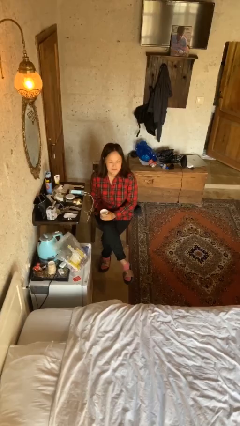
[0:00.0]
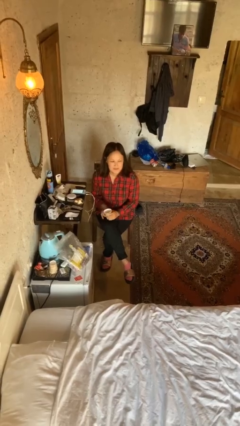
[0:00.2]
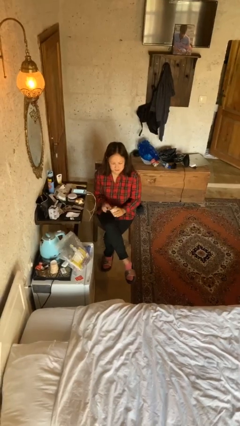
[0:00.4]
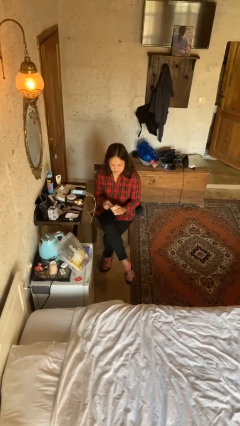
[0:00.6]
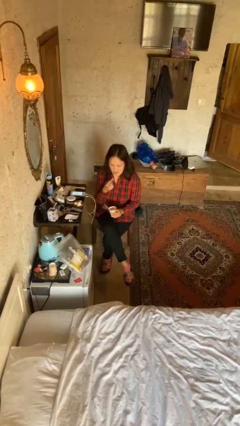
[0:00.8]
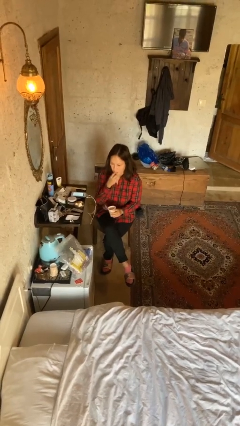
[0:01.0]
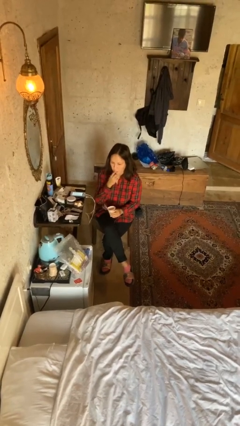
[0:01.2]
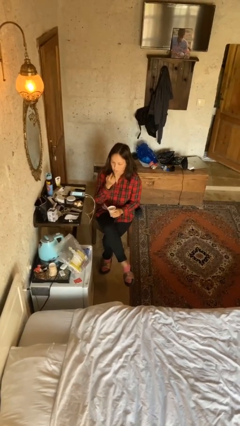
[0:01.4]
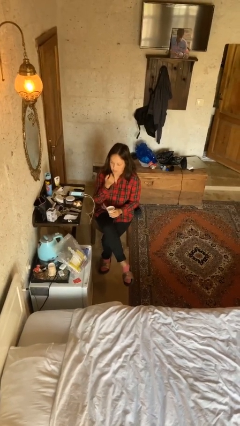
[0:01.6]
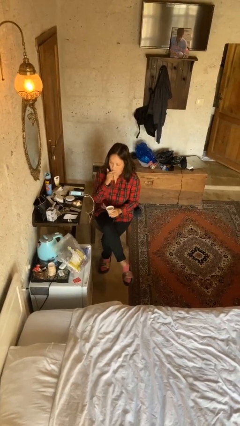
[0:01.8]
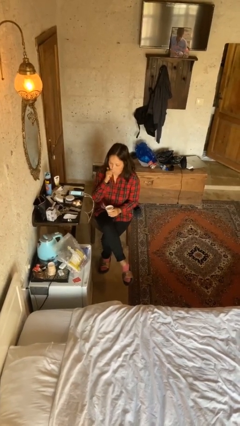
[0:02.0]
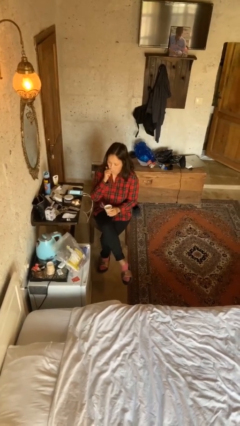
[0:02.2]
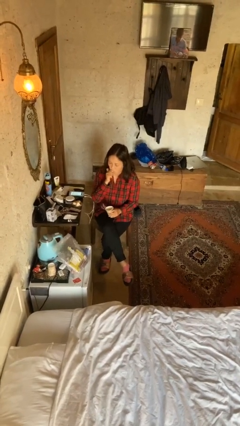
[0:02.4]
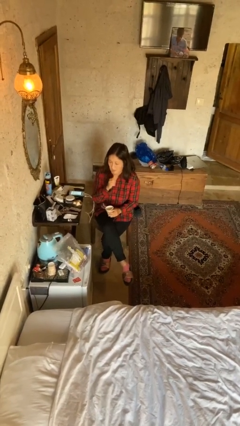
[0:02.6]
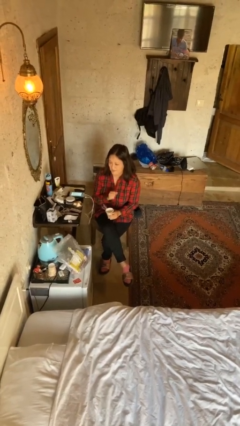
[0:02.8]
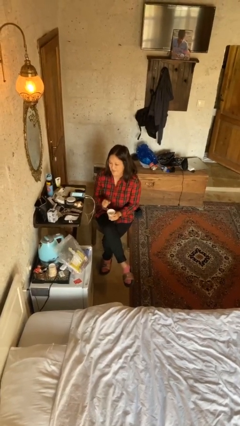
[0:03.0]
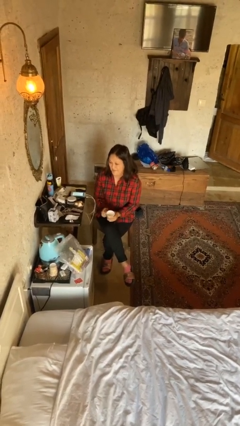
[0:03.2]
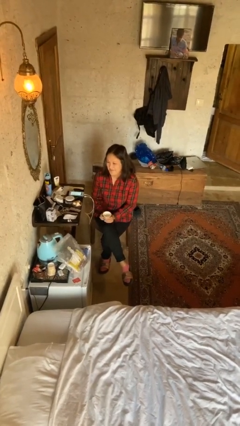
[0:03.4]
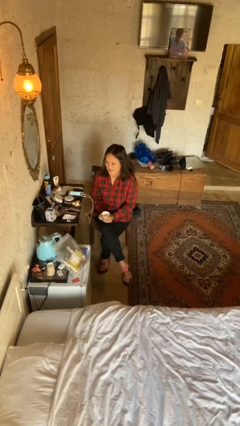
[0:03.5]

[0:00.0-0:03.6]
person licks fingers

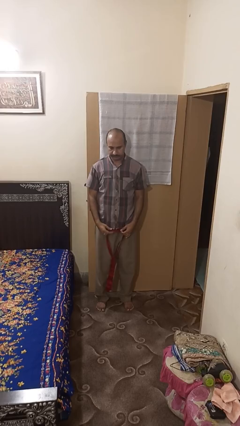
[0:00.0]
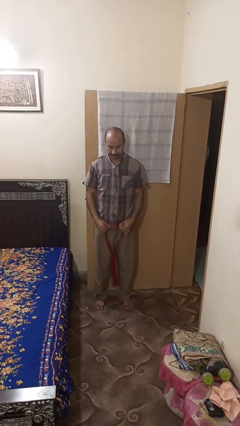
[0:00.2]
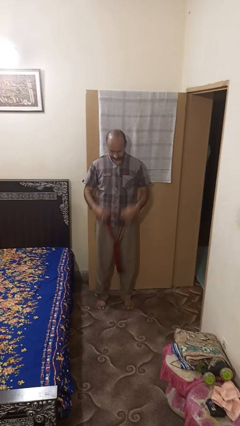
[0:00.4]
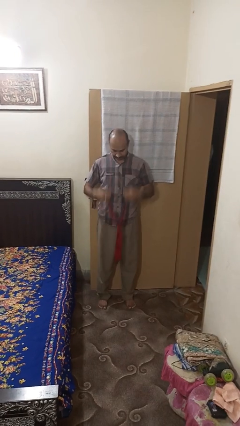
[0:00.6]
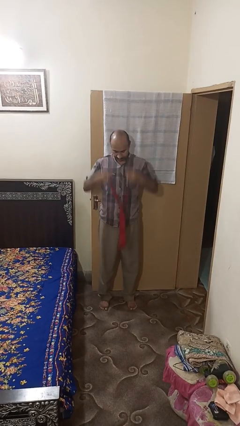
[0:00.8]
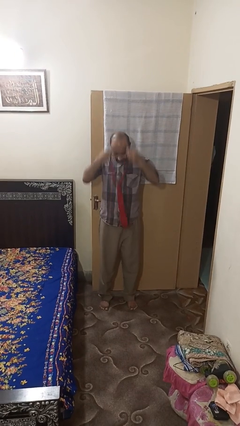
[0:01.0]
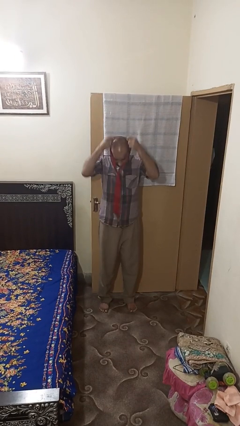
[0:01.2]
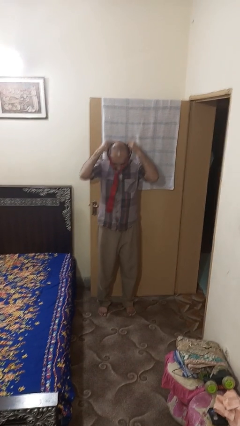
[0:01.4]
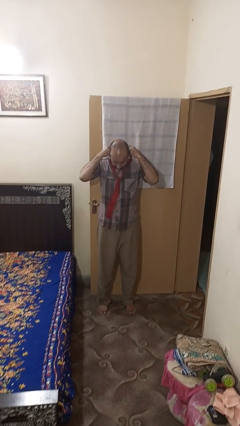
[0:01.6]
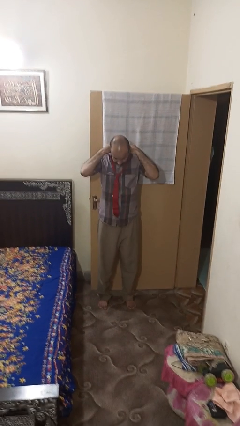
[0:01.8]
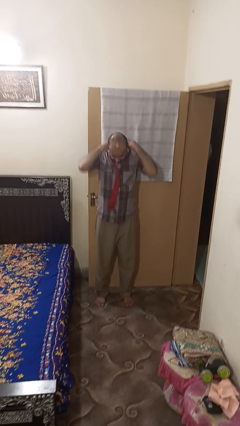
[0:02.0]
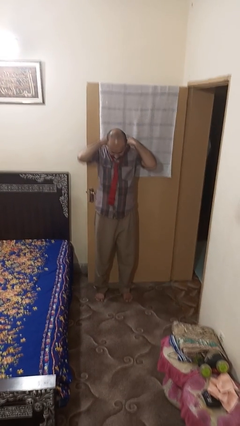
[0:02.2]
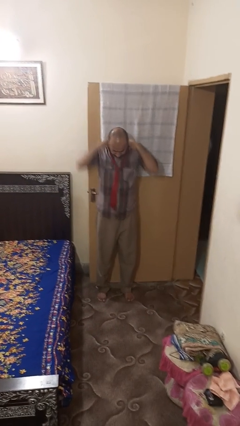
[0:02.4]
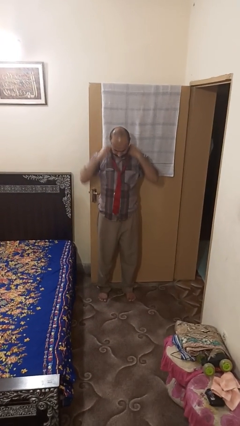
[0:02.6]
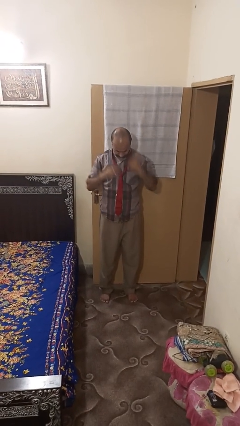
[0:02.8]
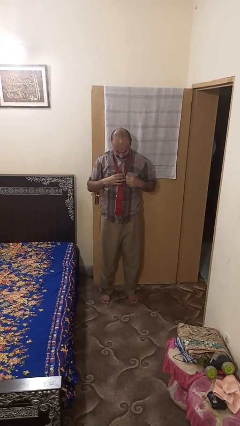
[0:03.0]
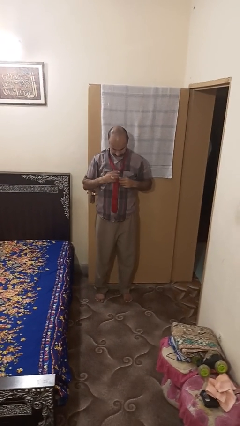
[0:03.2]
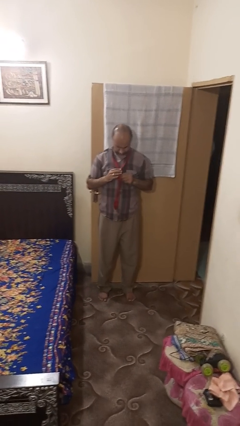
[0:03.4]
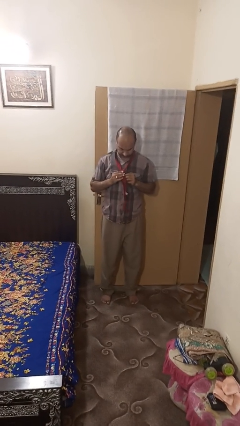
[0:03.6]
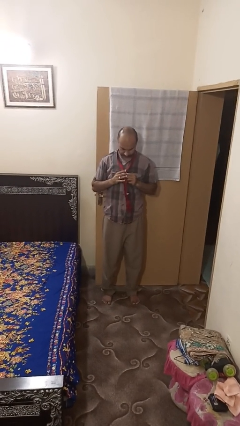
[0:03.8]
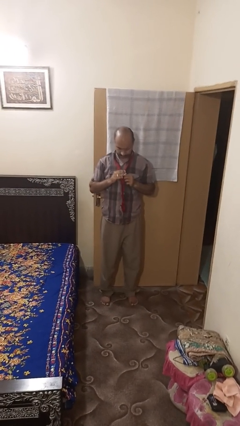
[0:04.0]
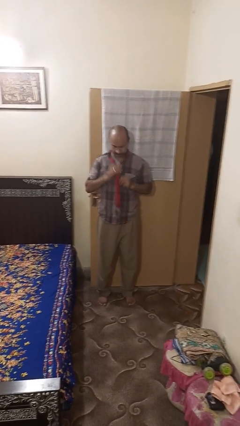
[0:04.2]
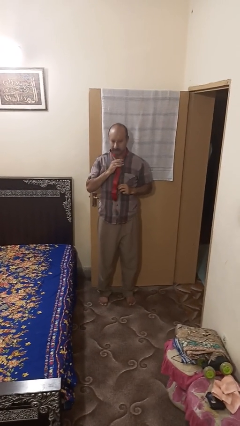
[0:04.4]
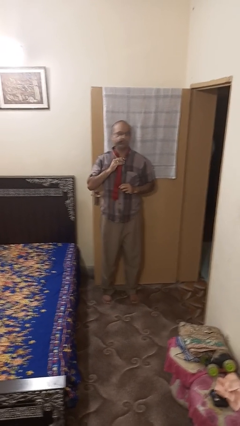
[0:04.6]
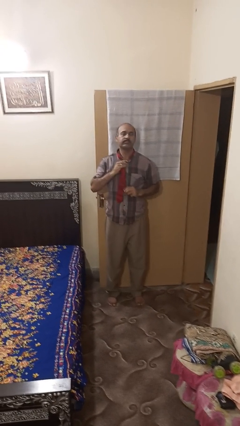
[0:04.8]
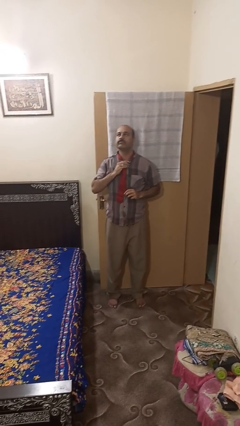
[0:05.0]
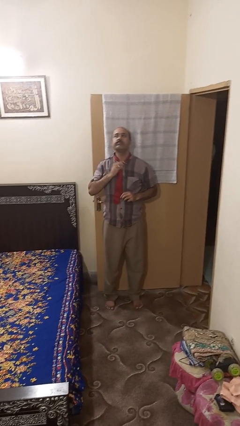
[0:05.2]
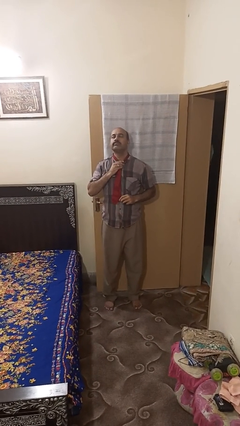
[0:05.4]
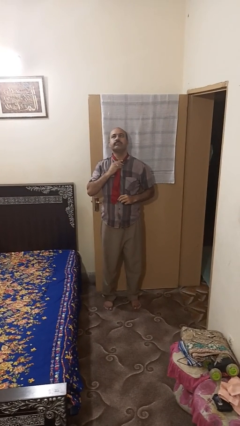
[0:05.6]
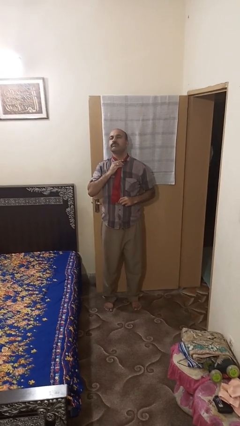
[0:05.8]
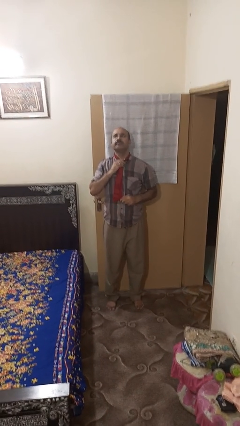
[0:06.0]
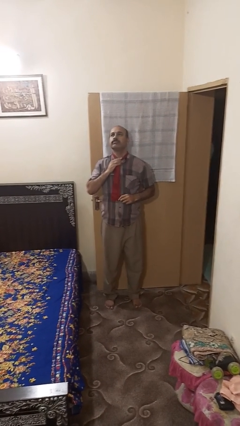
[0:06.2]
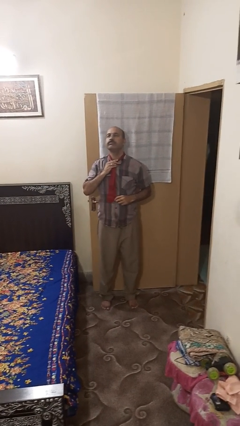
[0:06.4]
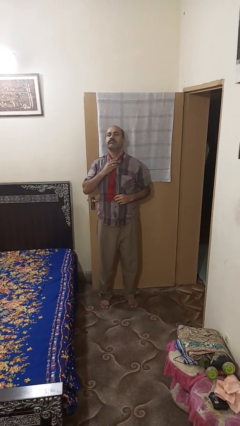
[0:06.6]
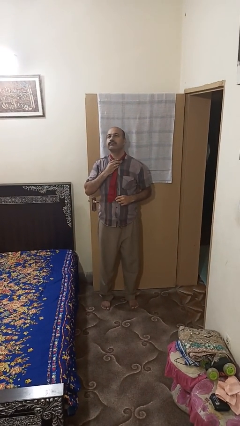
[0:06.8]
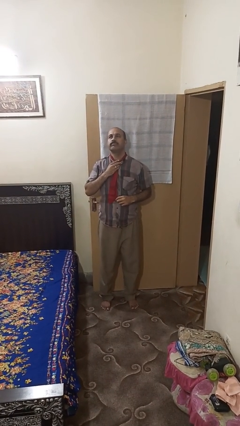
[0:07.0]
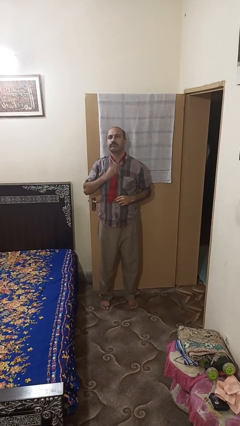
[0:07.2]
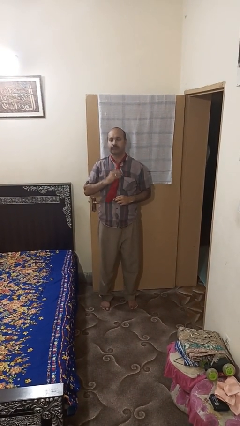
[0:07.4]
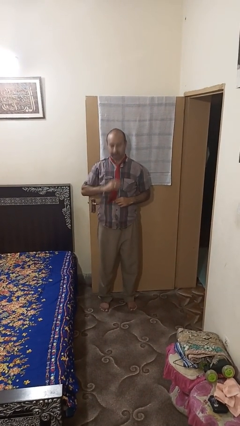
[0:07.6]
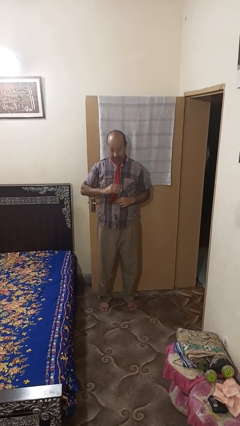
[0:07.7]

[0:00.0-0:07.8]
person puts on necktie

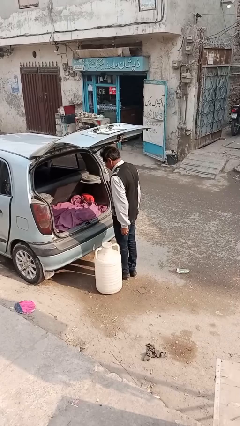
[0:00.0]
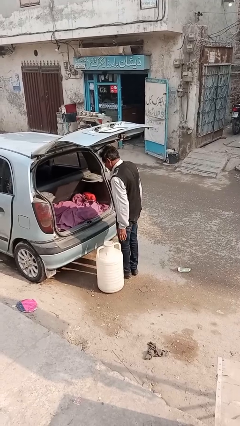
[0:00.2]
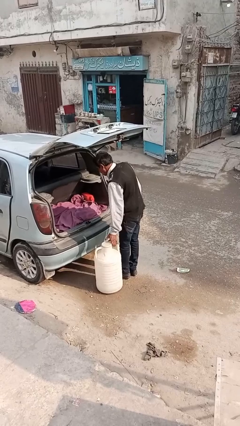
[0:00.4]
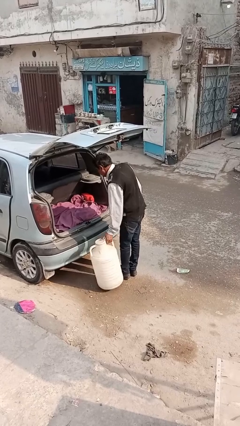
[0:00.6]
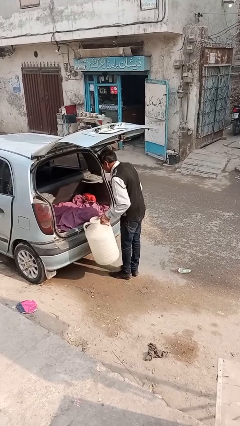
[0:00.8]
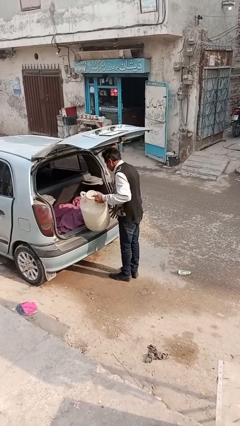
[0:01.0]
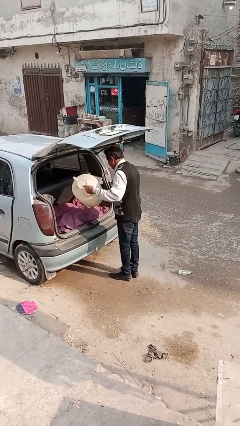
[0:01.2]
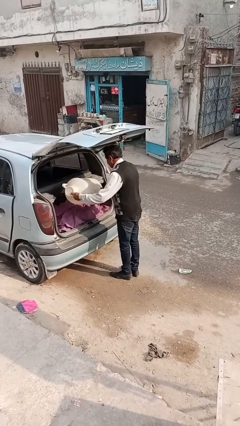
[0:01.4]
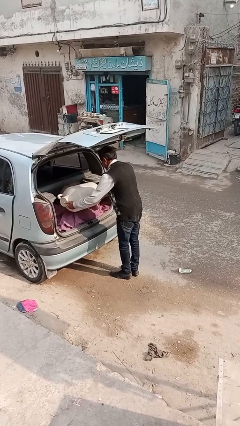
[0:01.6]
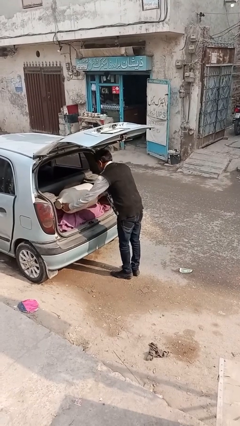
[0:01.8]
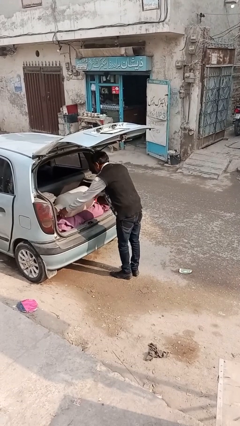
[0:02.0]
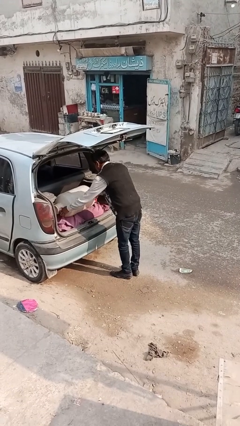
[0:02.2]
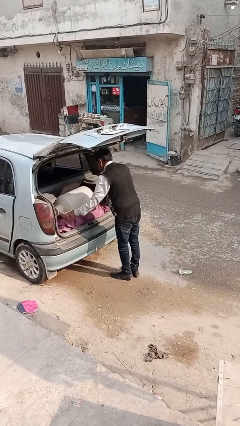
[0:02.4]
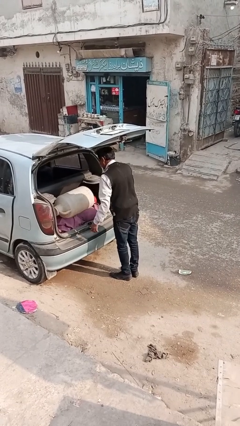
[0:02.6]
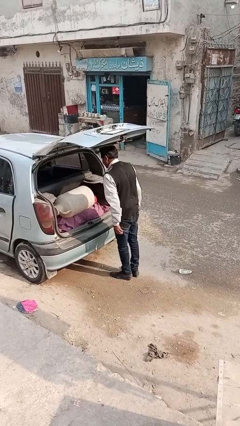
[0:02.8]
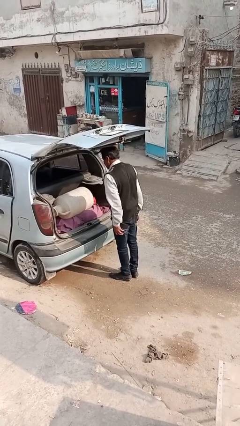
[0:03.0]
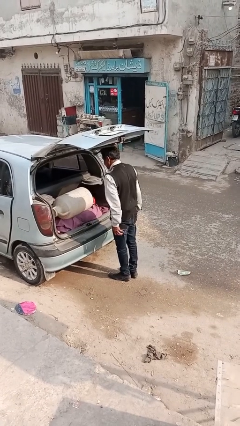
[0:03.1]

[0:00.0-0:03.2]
person loads car

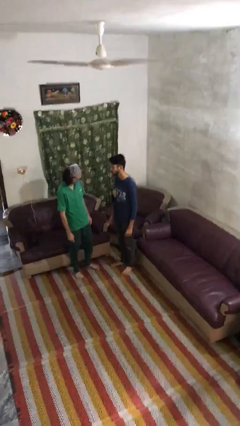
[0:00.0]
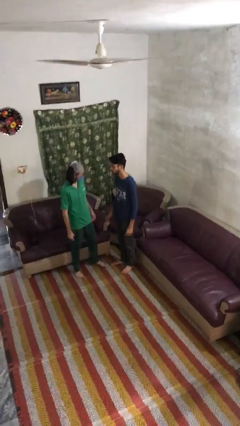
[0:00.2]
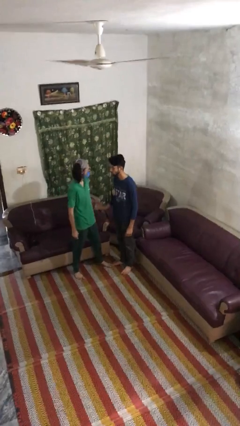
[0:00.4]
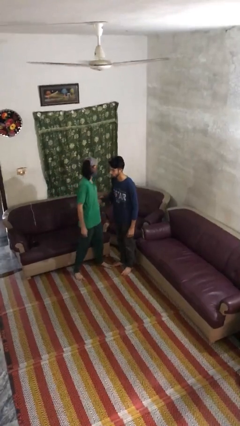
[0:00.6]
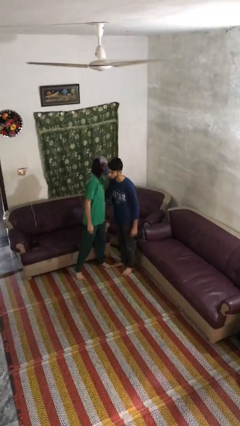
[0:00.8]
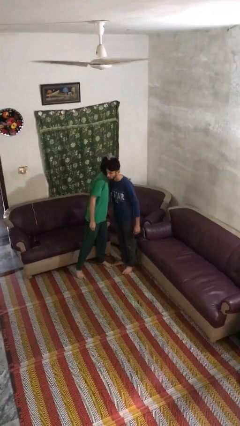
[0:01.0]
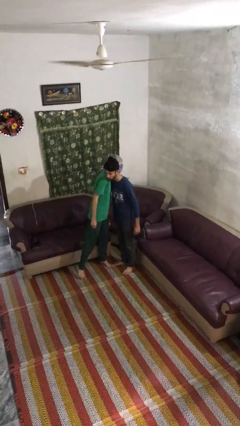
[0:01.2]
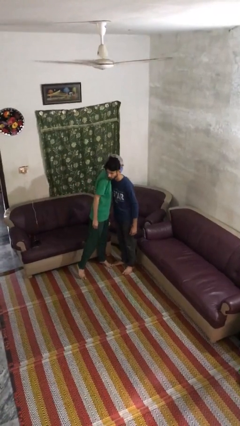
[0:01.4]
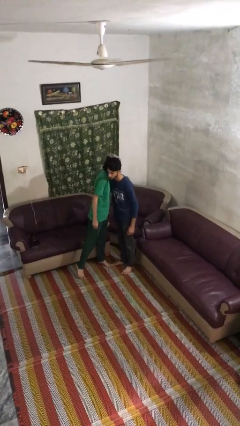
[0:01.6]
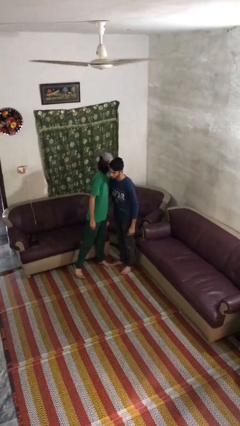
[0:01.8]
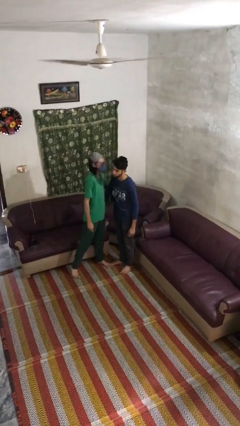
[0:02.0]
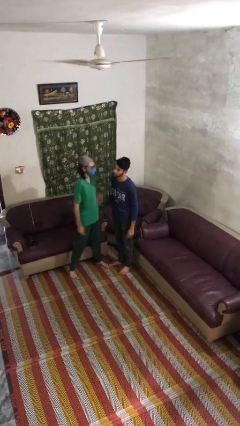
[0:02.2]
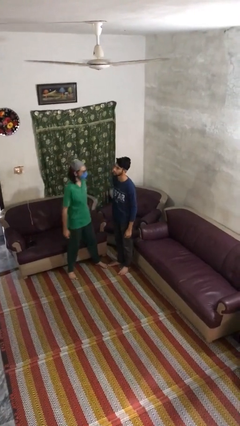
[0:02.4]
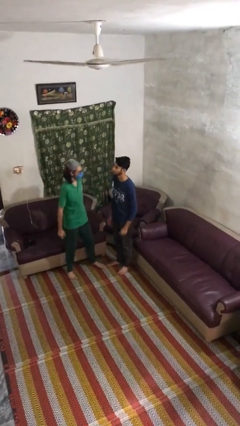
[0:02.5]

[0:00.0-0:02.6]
person embraces person

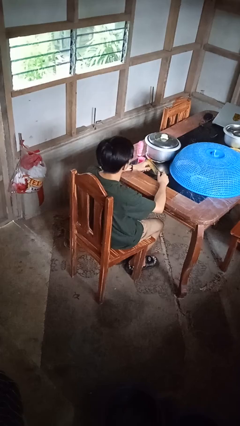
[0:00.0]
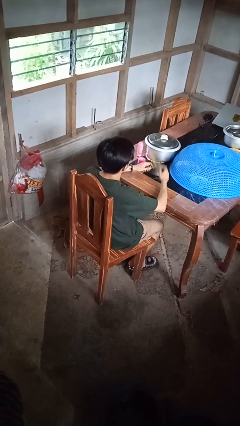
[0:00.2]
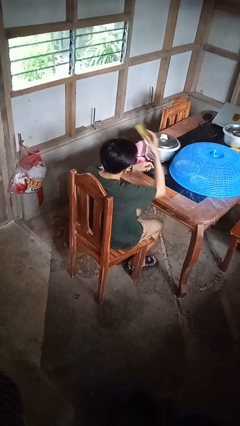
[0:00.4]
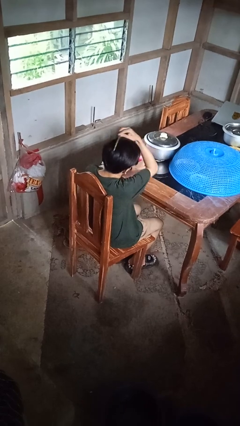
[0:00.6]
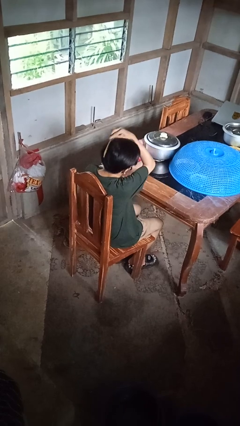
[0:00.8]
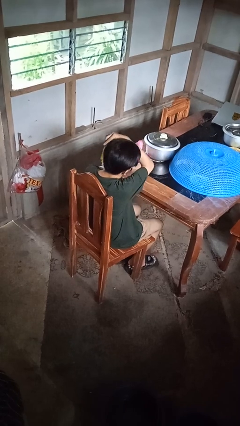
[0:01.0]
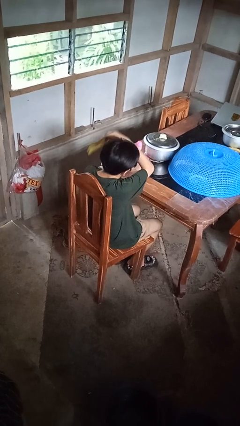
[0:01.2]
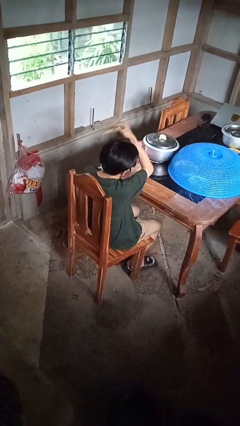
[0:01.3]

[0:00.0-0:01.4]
person brushes hair
